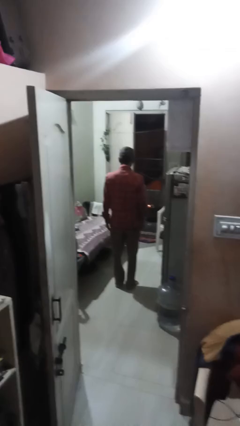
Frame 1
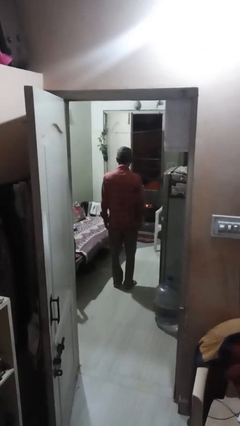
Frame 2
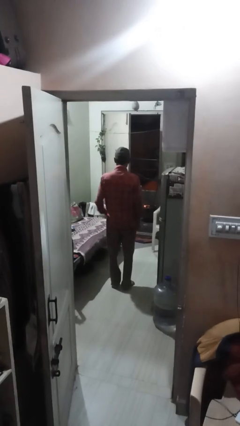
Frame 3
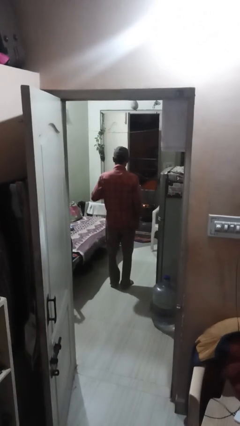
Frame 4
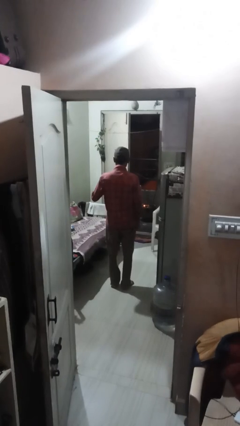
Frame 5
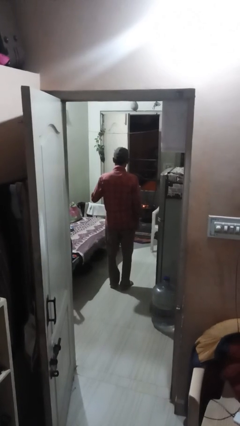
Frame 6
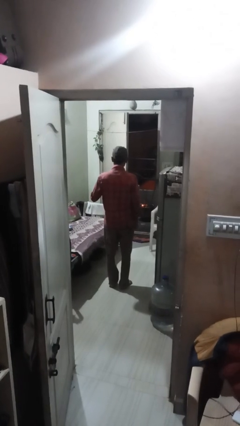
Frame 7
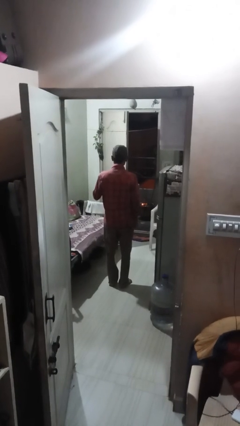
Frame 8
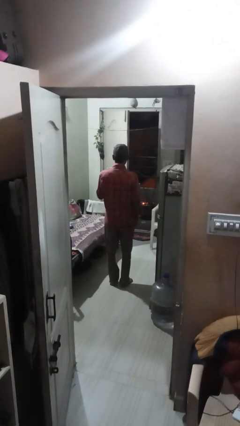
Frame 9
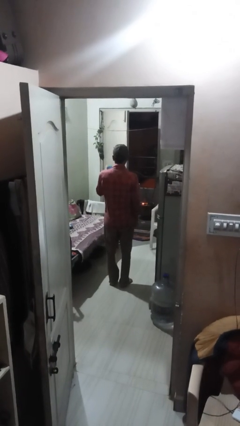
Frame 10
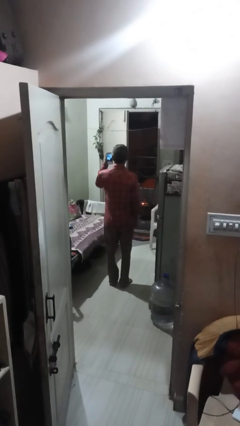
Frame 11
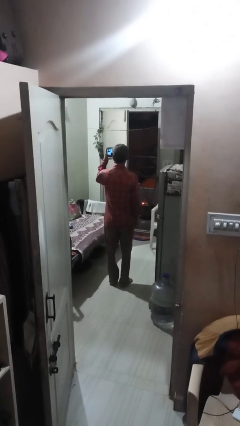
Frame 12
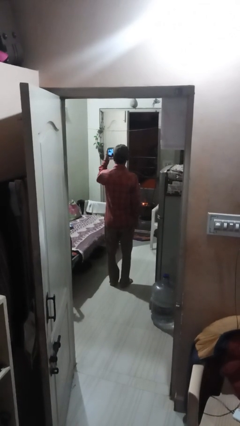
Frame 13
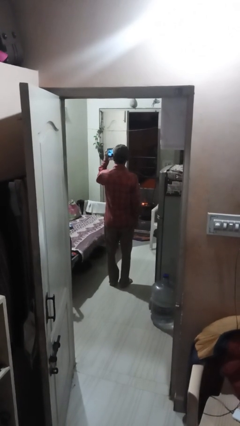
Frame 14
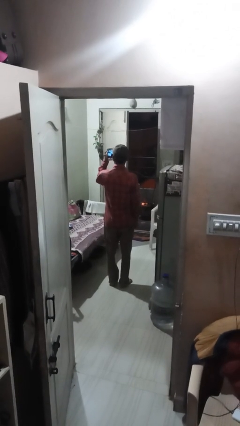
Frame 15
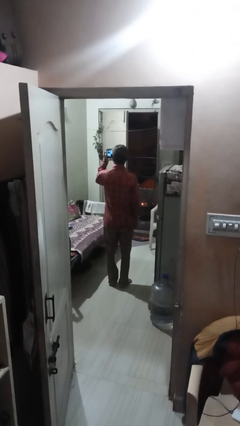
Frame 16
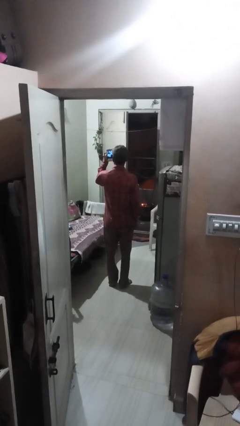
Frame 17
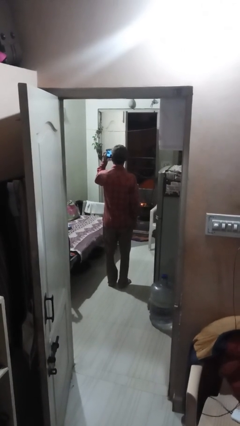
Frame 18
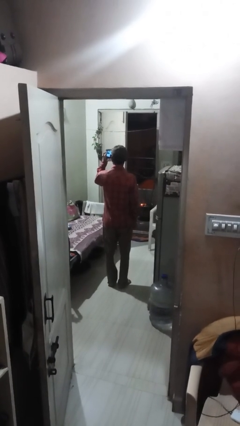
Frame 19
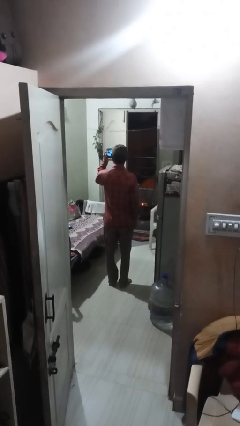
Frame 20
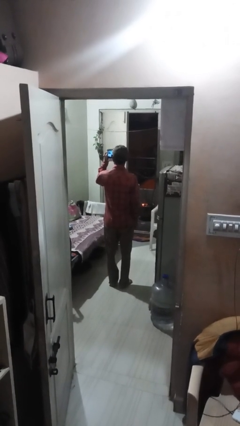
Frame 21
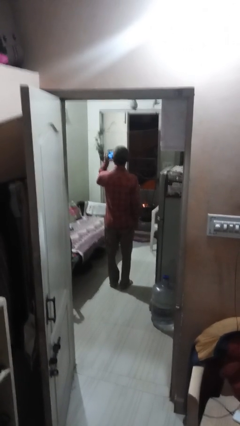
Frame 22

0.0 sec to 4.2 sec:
person takes phone from pocket

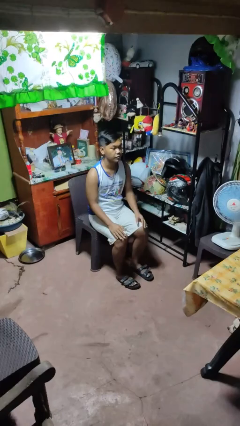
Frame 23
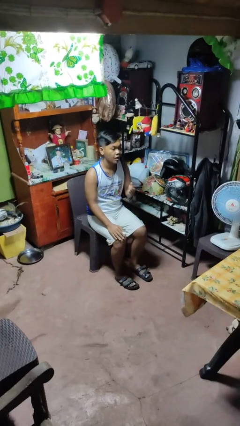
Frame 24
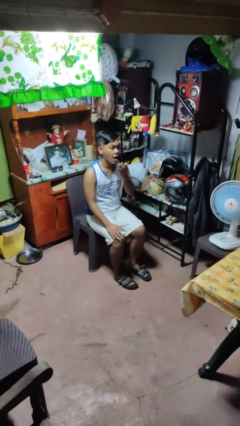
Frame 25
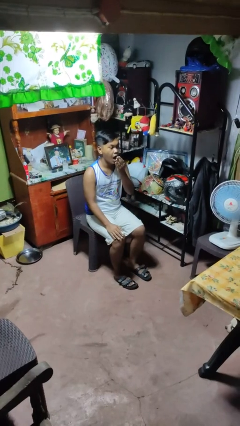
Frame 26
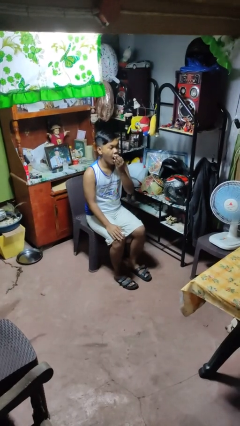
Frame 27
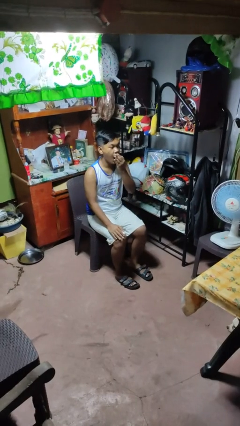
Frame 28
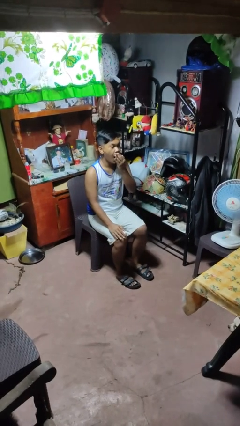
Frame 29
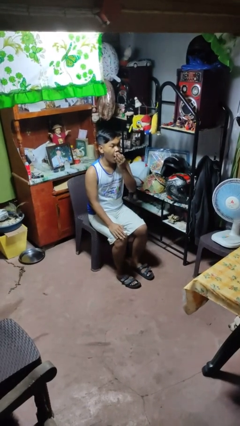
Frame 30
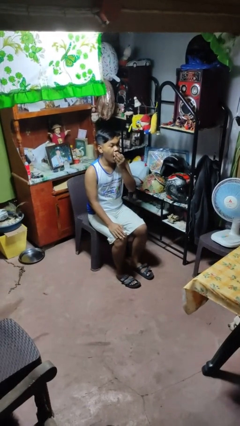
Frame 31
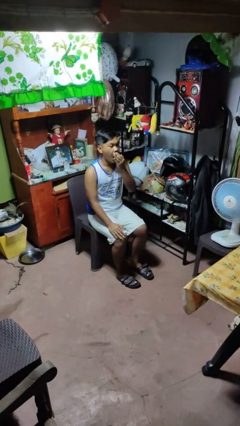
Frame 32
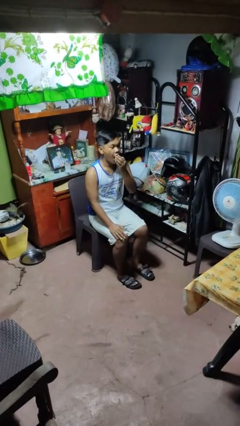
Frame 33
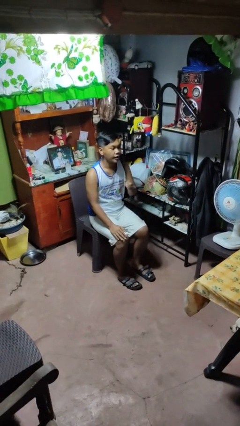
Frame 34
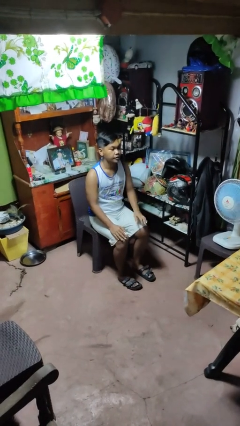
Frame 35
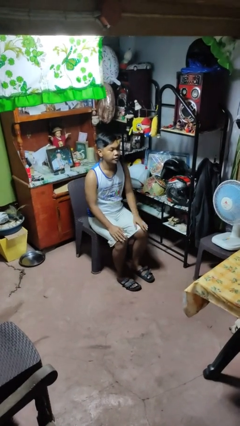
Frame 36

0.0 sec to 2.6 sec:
person yawns

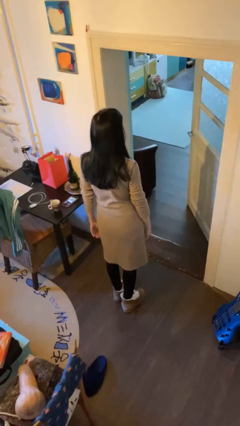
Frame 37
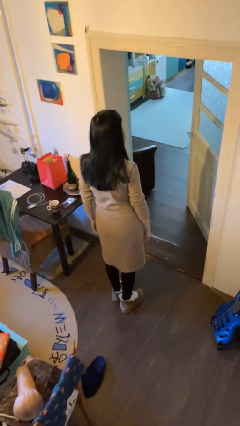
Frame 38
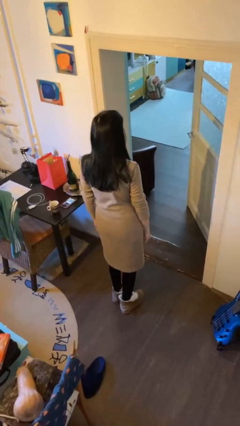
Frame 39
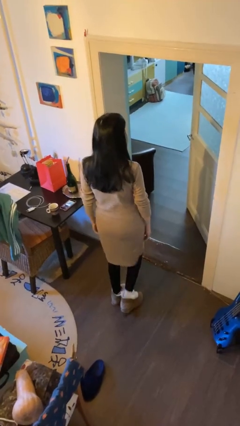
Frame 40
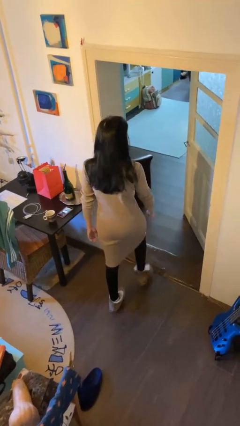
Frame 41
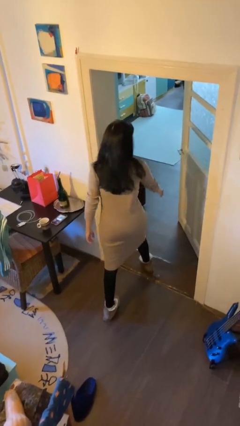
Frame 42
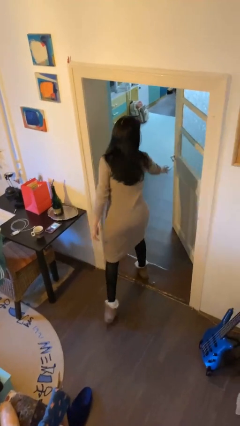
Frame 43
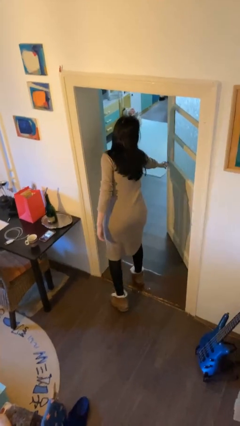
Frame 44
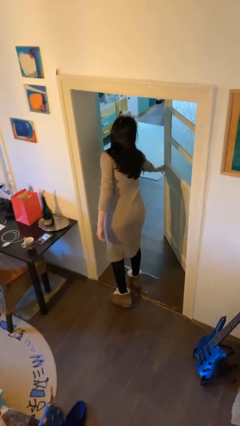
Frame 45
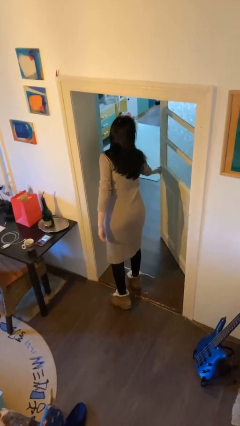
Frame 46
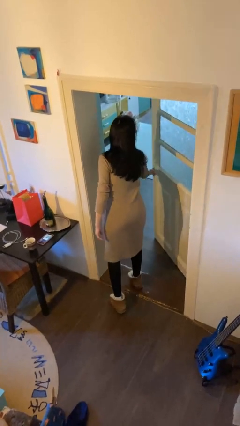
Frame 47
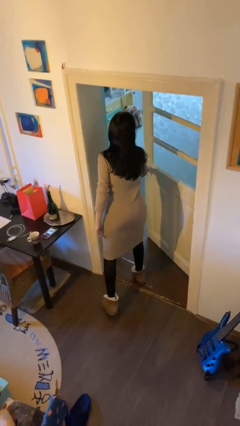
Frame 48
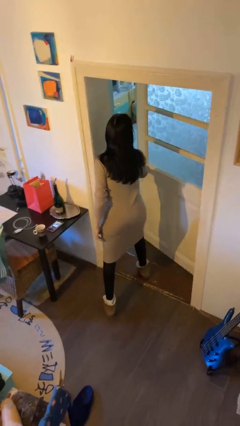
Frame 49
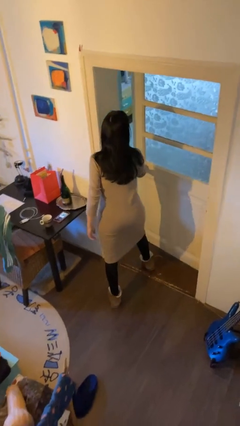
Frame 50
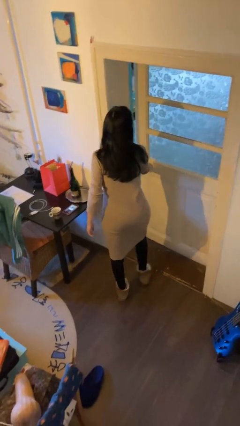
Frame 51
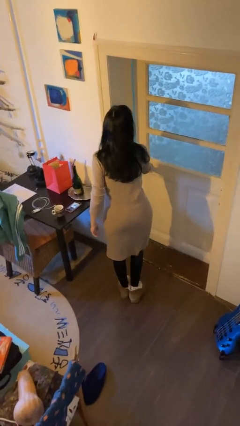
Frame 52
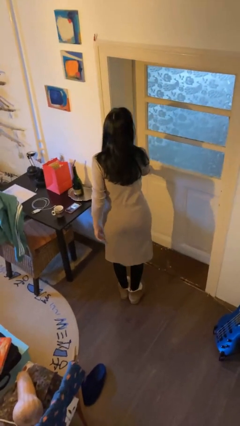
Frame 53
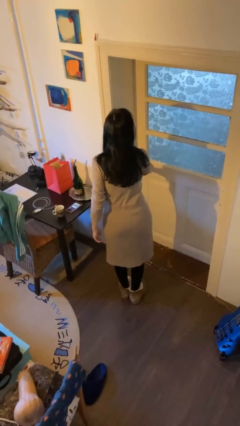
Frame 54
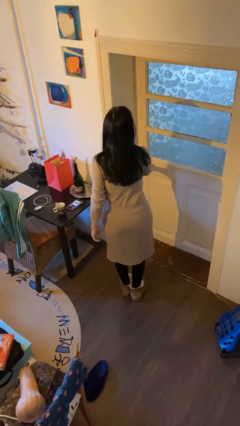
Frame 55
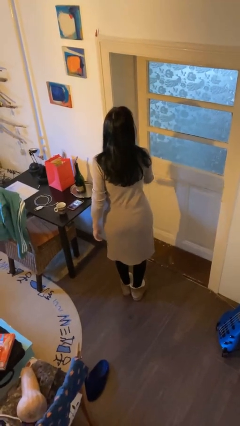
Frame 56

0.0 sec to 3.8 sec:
person closes facility door

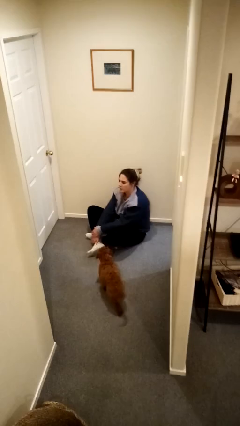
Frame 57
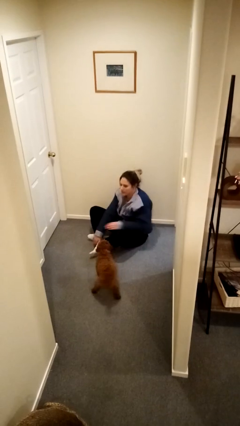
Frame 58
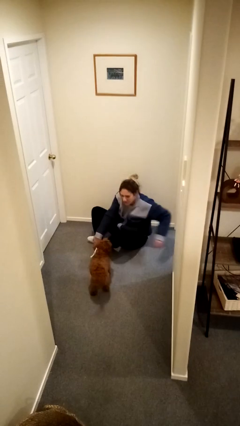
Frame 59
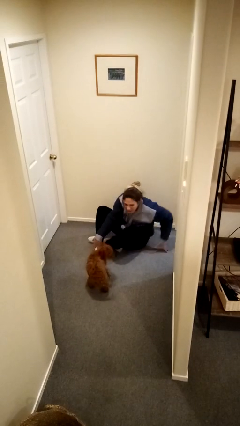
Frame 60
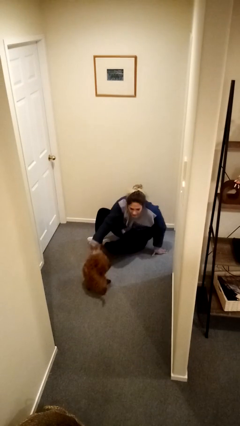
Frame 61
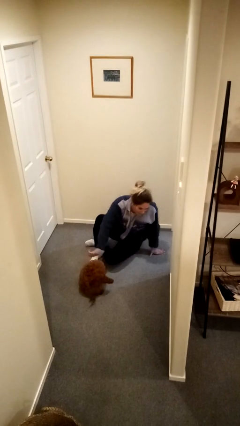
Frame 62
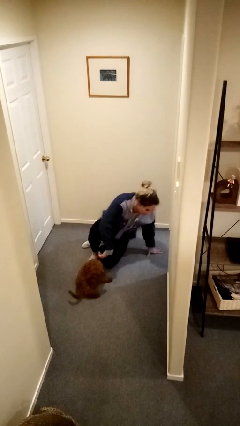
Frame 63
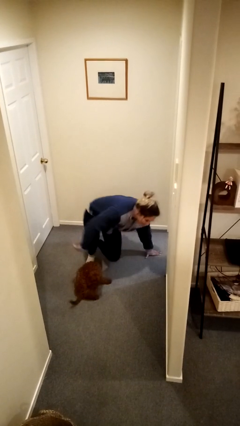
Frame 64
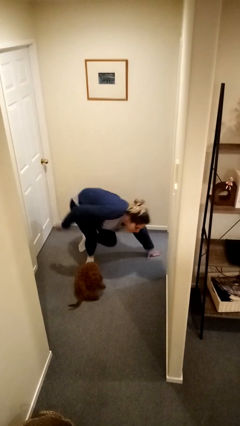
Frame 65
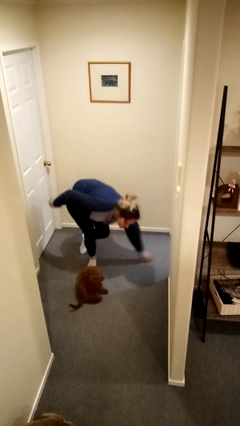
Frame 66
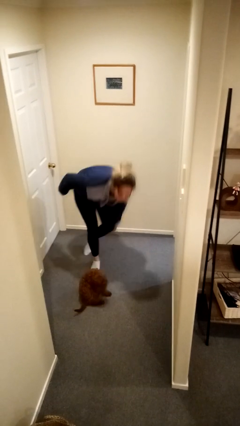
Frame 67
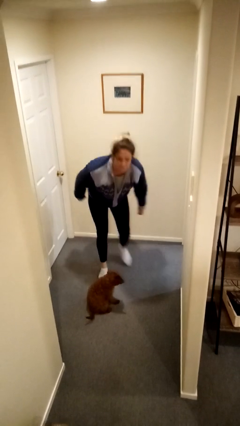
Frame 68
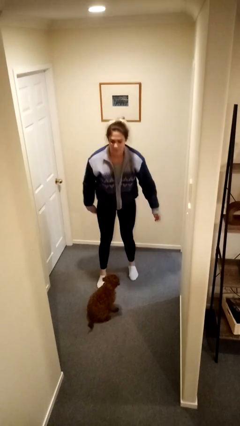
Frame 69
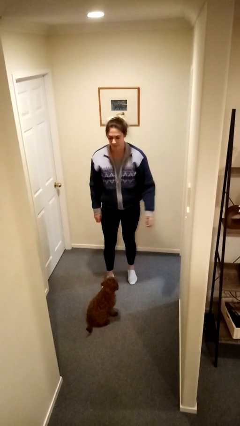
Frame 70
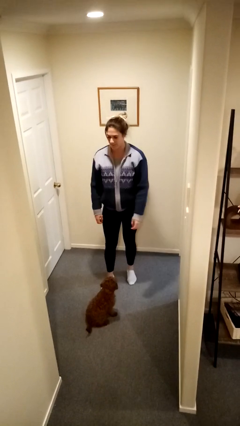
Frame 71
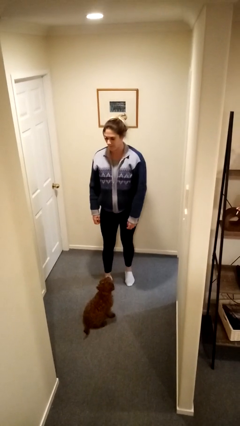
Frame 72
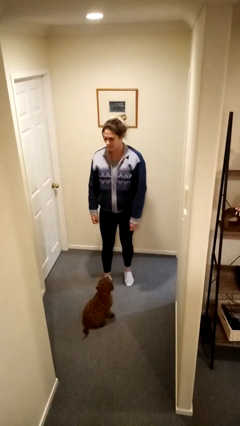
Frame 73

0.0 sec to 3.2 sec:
person stands up from floor

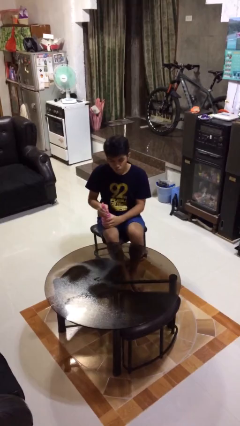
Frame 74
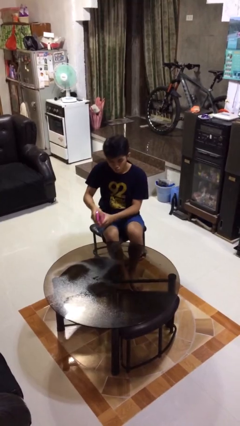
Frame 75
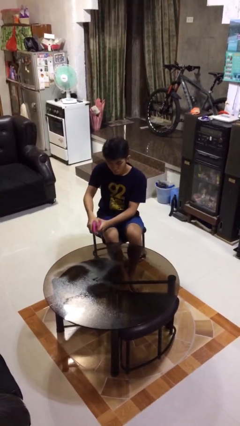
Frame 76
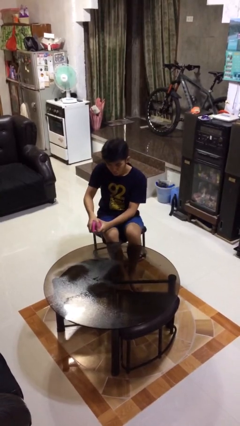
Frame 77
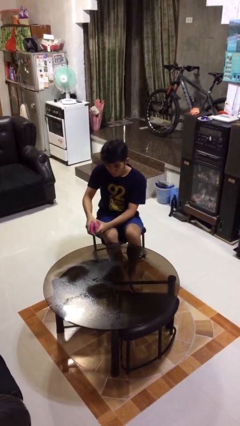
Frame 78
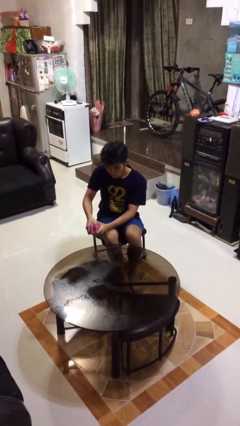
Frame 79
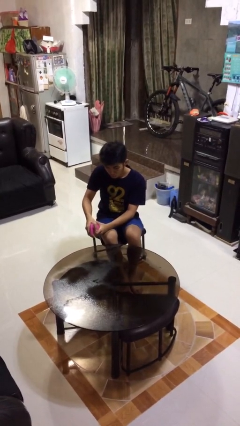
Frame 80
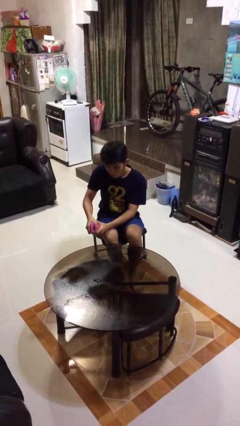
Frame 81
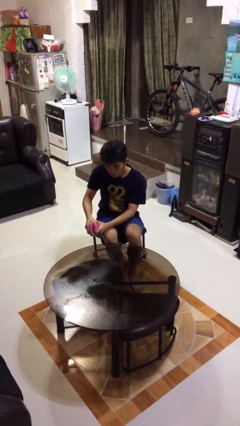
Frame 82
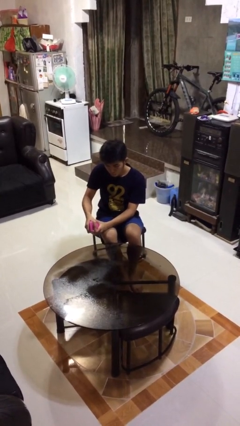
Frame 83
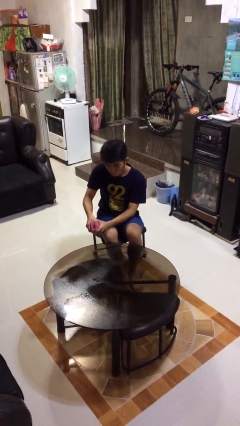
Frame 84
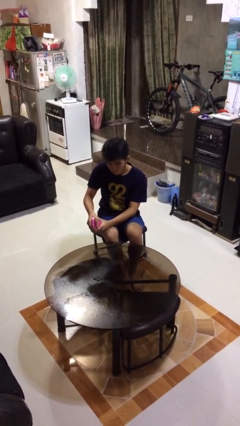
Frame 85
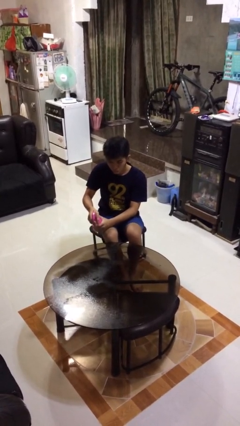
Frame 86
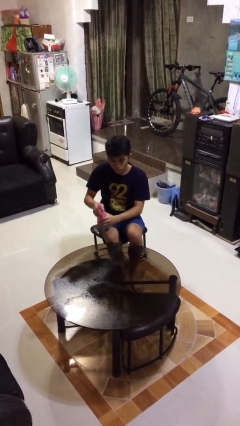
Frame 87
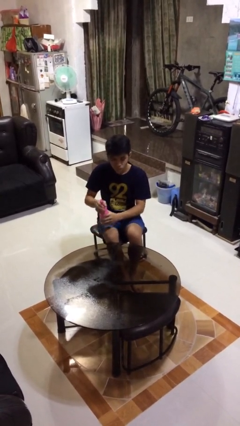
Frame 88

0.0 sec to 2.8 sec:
person sprays from bottle

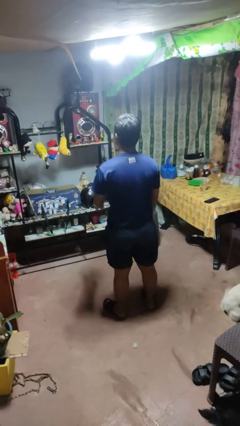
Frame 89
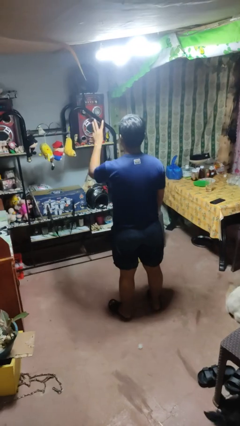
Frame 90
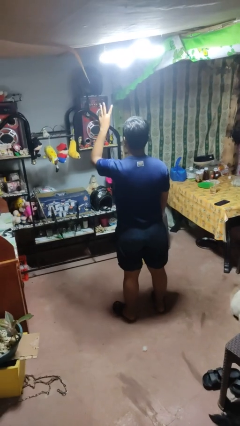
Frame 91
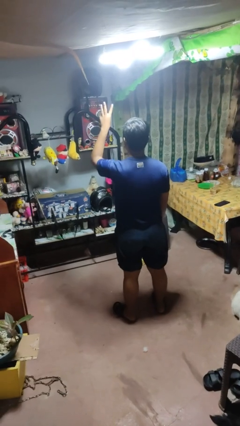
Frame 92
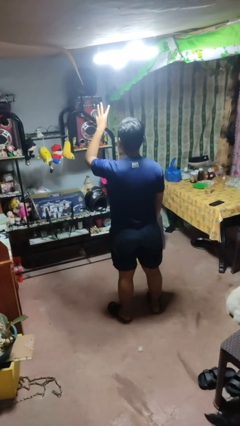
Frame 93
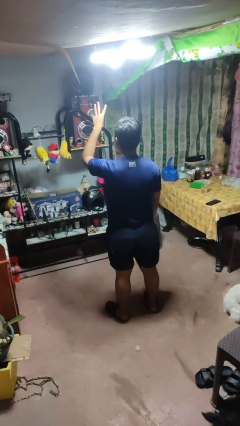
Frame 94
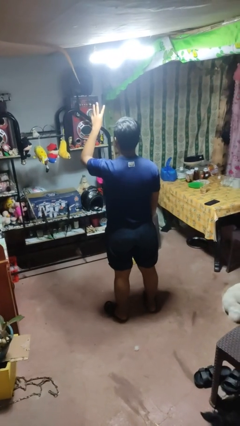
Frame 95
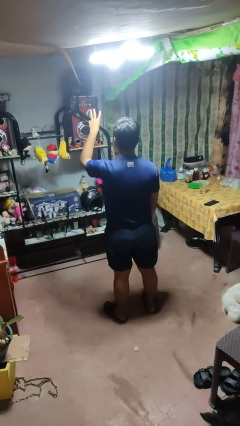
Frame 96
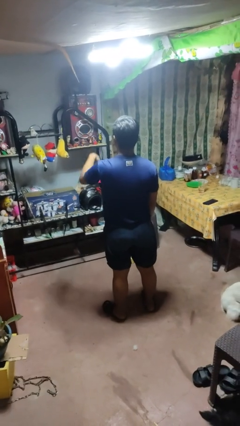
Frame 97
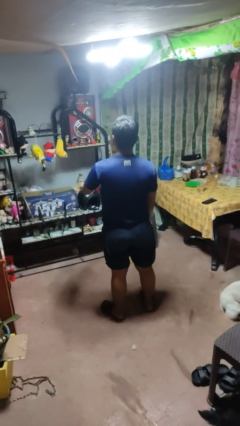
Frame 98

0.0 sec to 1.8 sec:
person gestures number three
